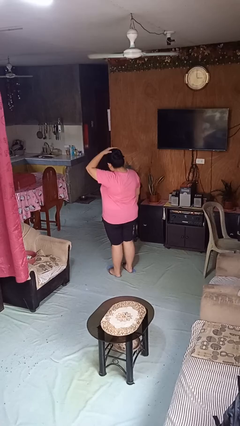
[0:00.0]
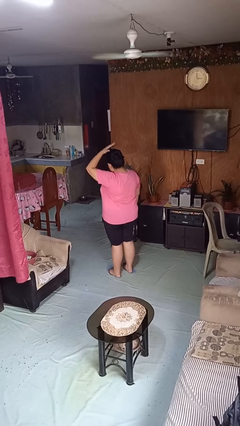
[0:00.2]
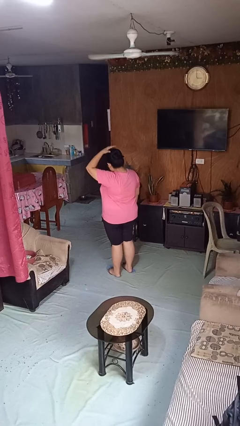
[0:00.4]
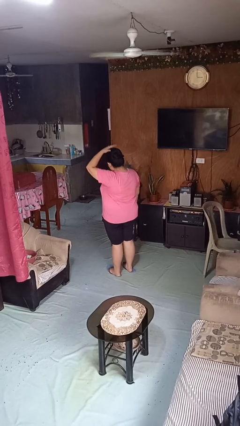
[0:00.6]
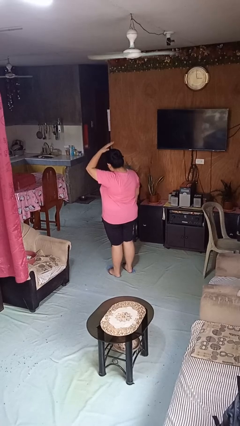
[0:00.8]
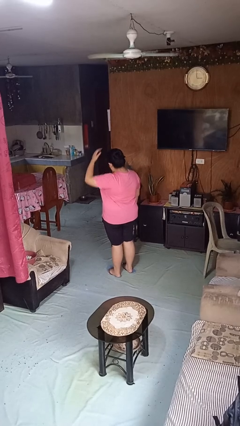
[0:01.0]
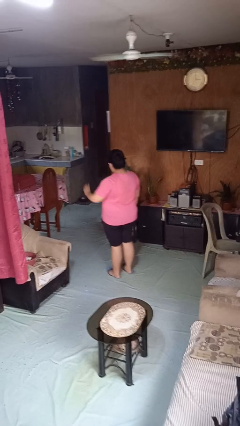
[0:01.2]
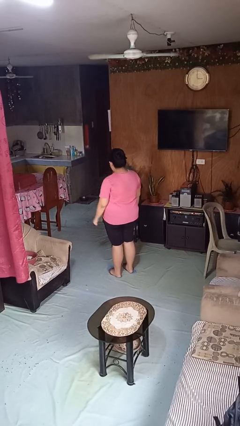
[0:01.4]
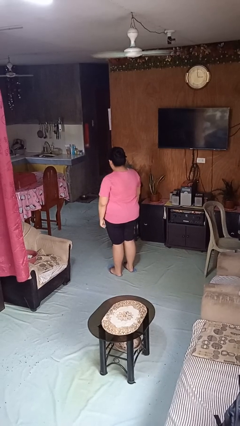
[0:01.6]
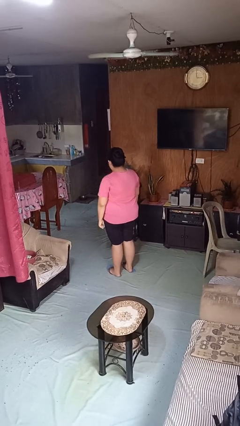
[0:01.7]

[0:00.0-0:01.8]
person pats head

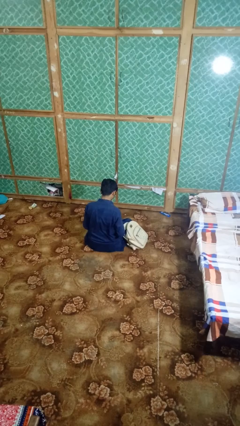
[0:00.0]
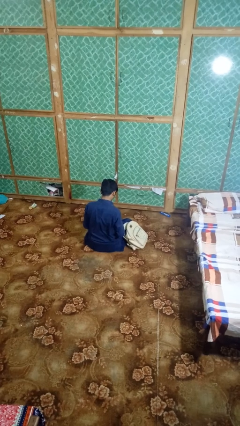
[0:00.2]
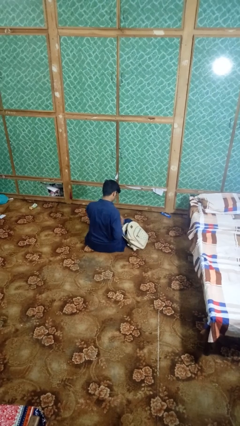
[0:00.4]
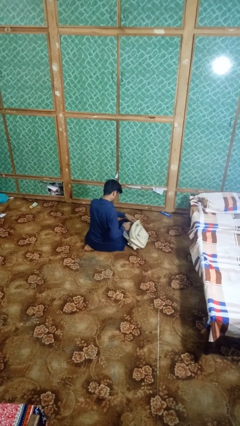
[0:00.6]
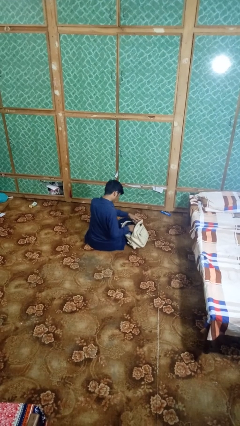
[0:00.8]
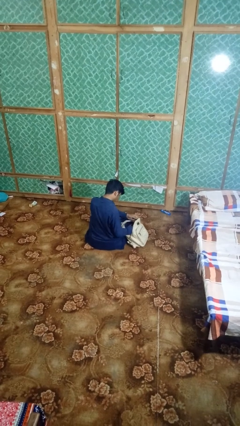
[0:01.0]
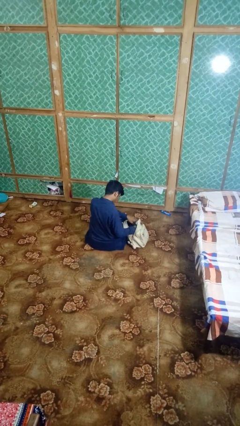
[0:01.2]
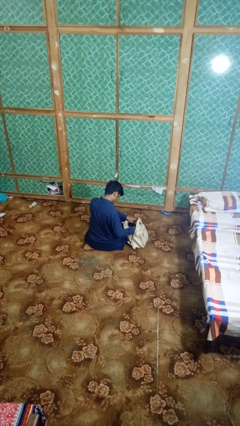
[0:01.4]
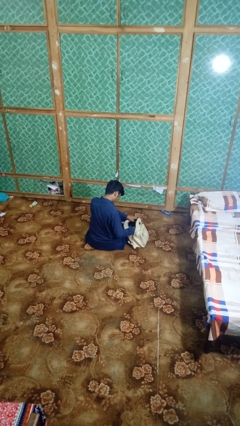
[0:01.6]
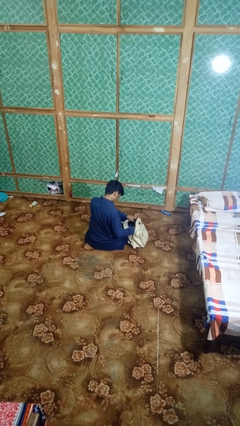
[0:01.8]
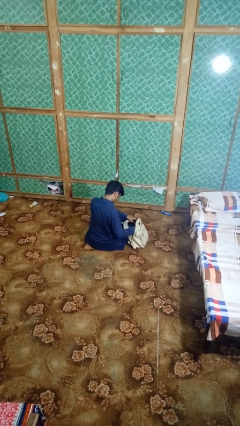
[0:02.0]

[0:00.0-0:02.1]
person searches in backpack

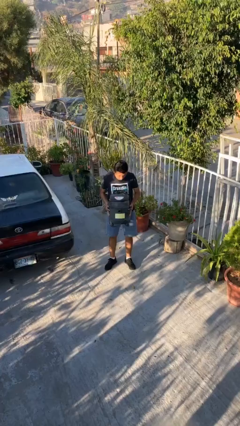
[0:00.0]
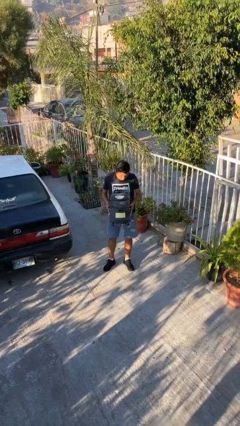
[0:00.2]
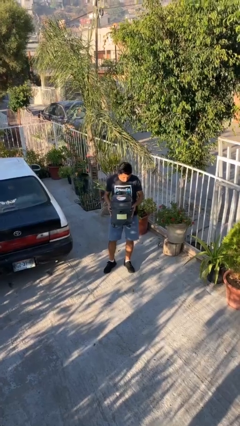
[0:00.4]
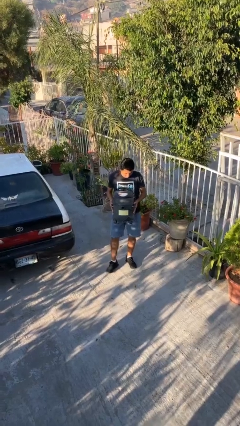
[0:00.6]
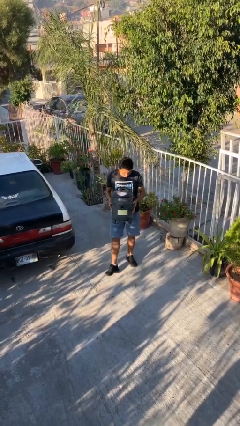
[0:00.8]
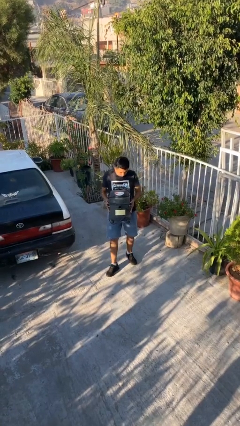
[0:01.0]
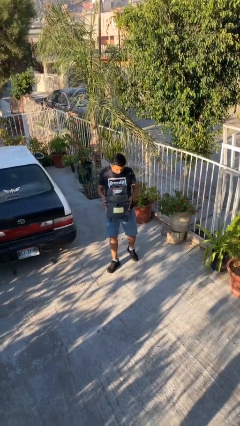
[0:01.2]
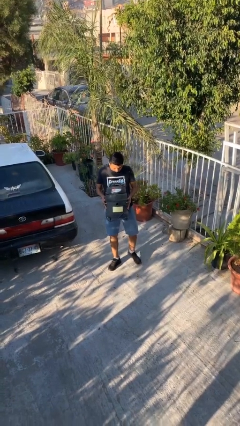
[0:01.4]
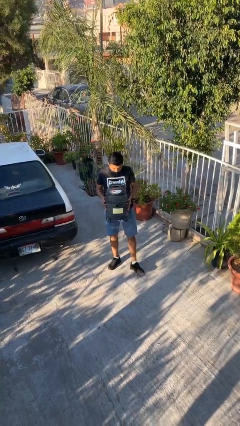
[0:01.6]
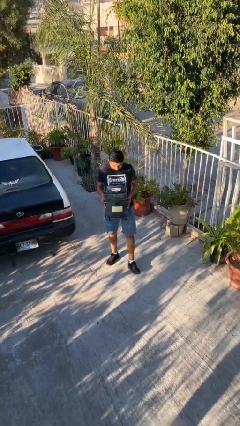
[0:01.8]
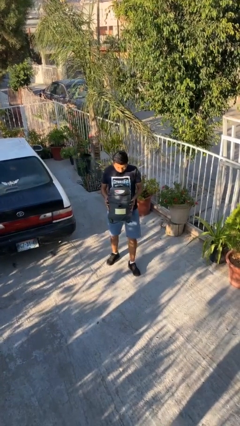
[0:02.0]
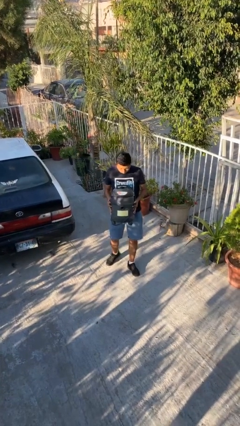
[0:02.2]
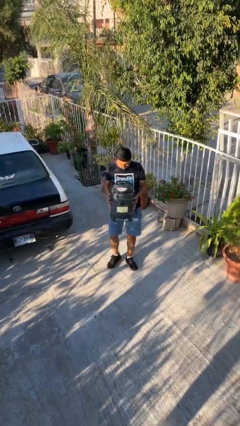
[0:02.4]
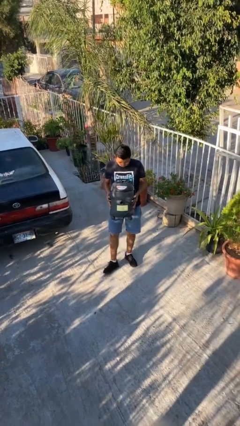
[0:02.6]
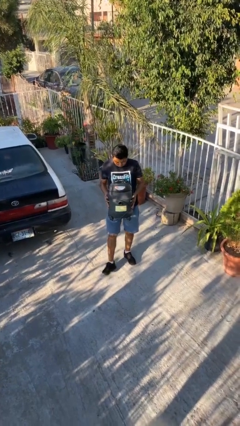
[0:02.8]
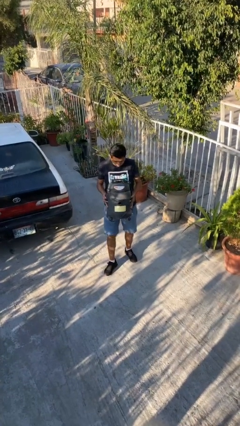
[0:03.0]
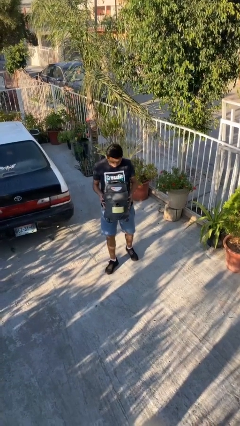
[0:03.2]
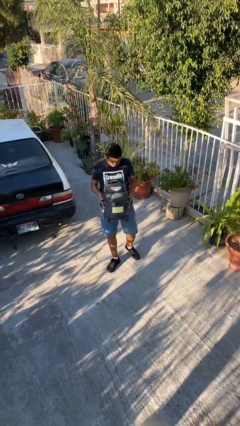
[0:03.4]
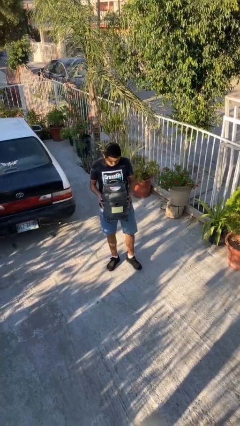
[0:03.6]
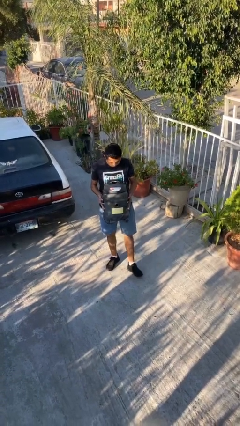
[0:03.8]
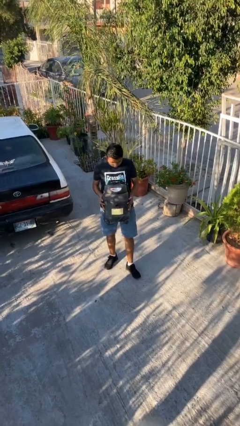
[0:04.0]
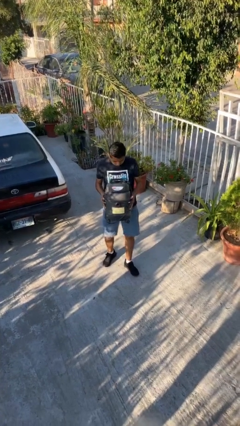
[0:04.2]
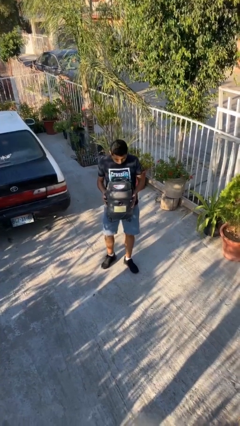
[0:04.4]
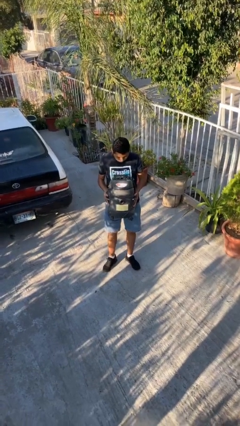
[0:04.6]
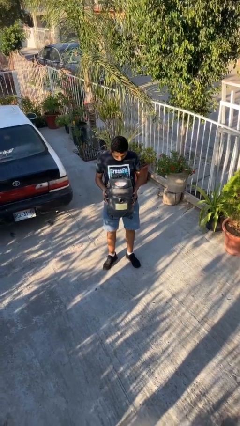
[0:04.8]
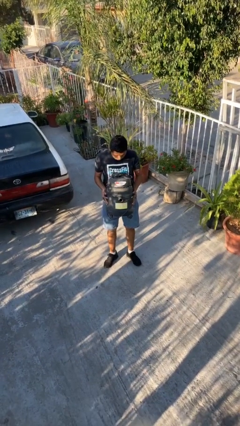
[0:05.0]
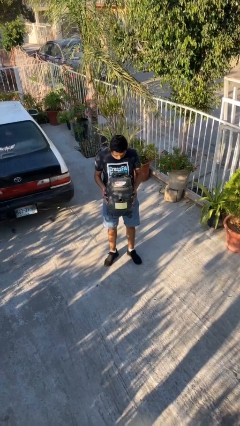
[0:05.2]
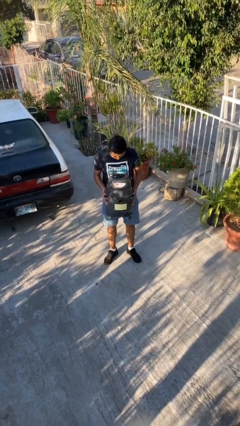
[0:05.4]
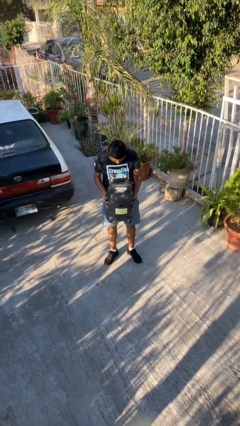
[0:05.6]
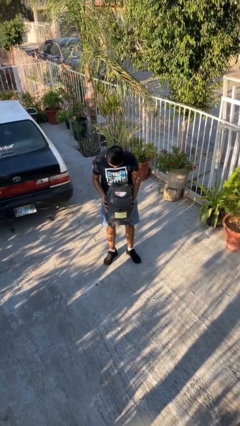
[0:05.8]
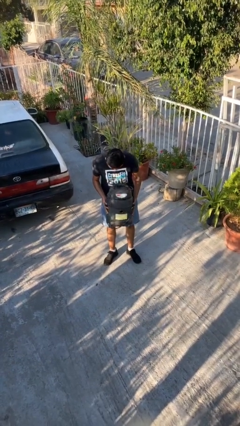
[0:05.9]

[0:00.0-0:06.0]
person carries heavy object

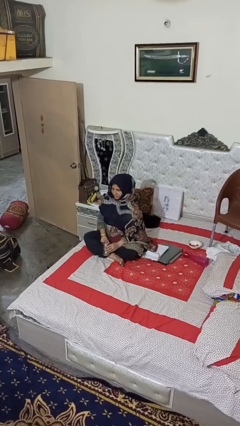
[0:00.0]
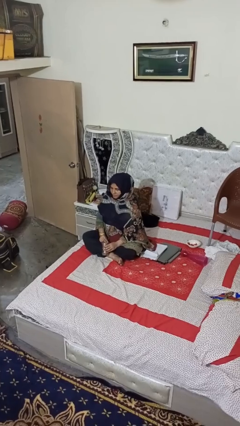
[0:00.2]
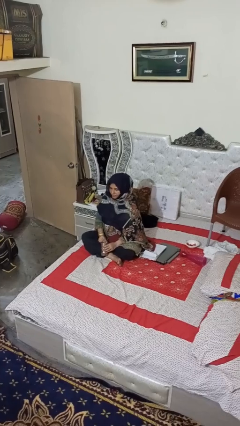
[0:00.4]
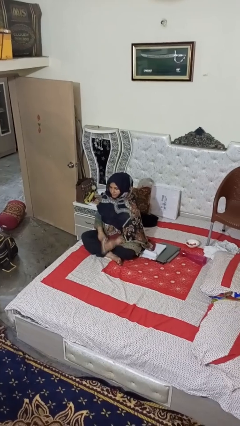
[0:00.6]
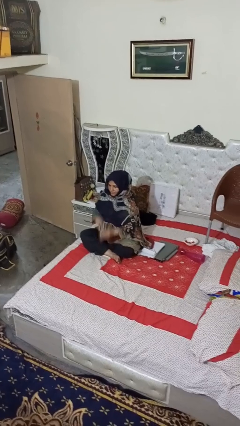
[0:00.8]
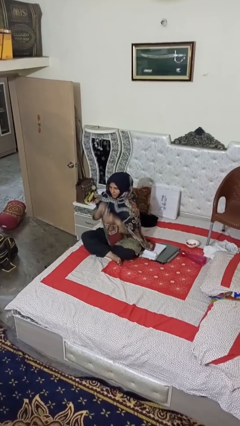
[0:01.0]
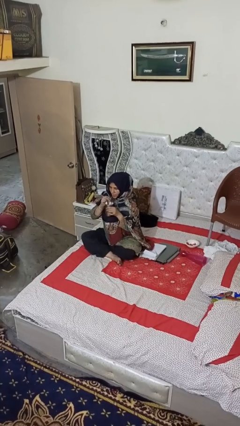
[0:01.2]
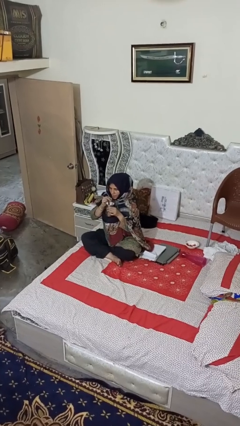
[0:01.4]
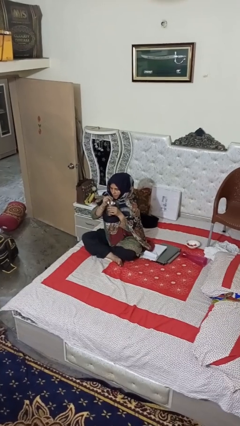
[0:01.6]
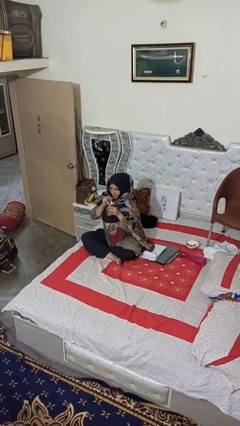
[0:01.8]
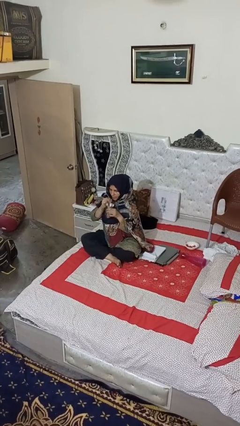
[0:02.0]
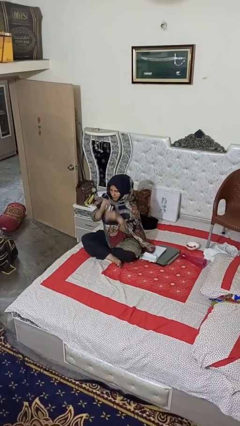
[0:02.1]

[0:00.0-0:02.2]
person drinks from straw

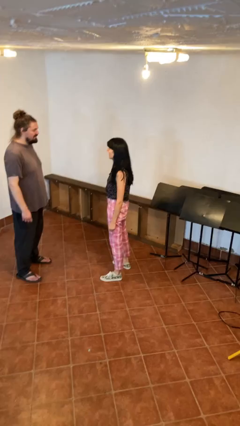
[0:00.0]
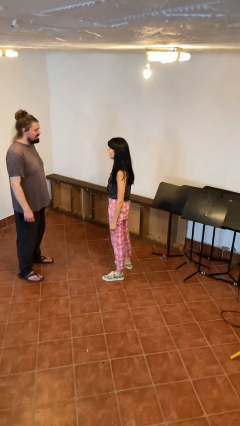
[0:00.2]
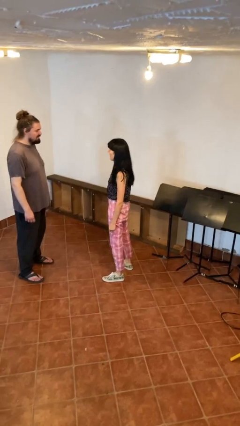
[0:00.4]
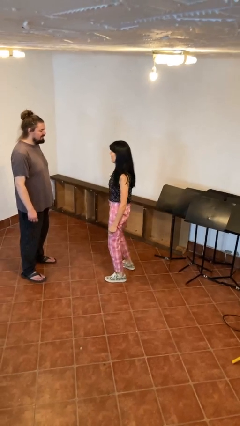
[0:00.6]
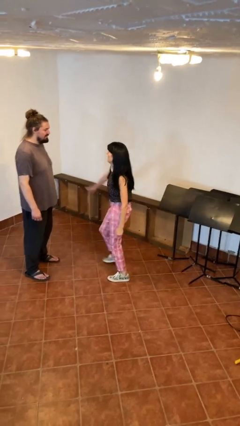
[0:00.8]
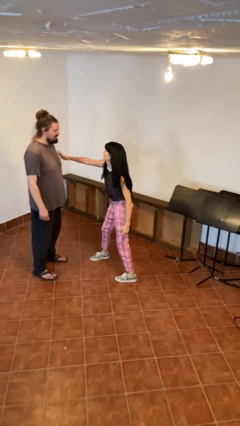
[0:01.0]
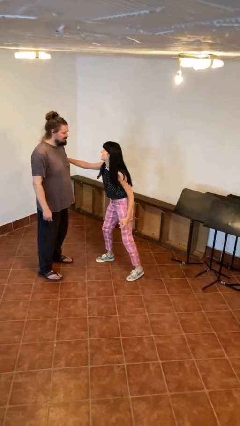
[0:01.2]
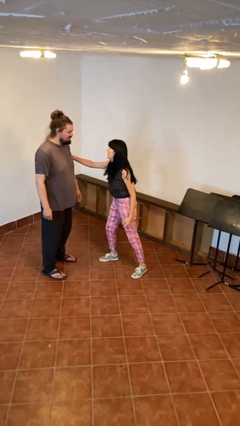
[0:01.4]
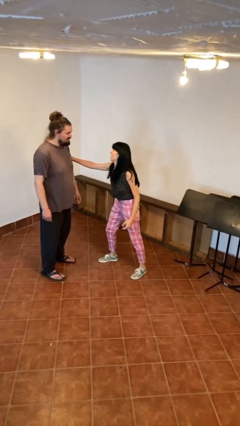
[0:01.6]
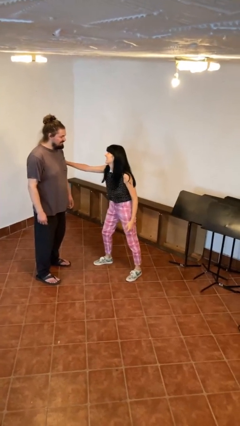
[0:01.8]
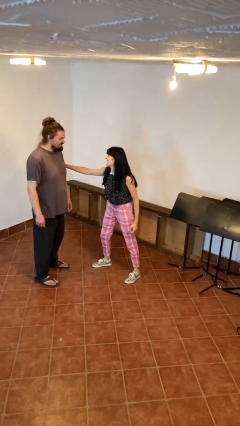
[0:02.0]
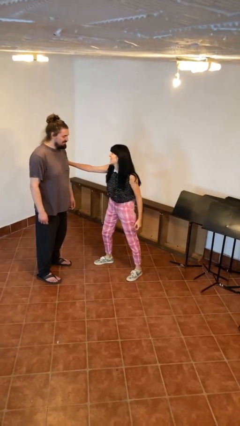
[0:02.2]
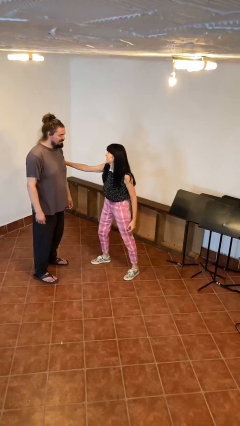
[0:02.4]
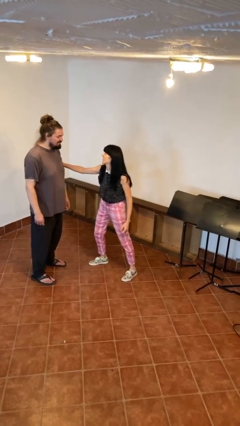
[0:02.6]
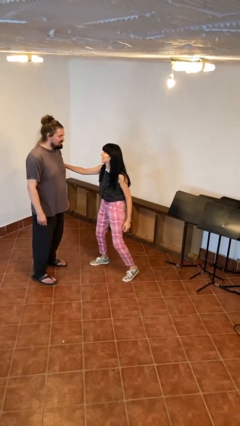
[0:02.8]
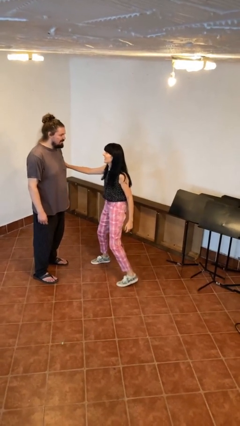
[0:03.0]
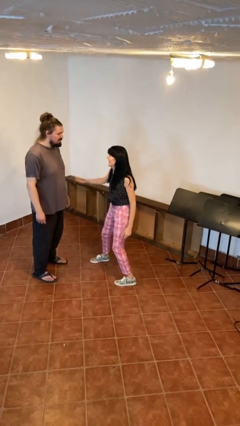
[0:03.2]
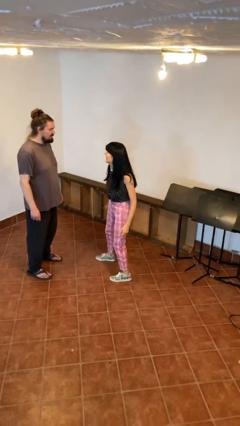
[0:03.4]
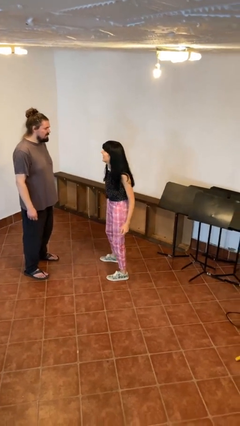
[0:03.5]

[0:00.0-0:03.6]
person grabs person by bicep

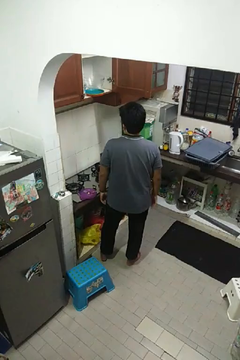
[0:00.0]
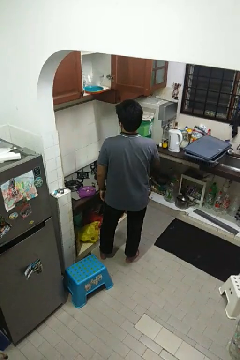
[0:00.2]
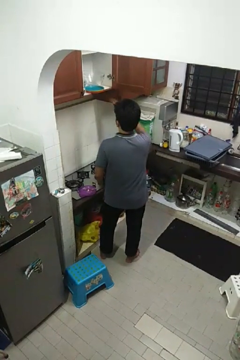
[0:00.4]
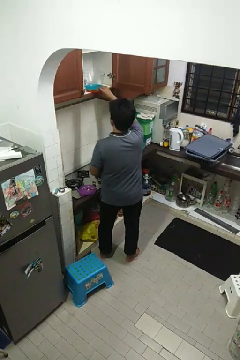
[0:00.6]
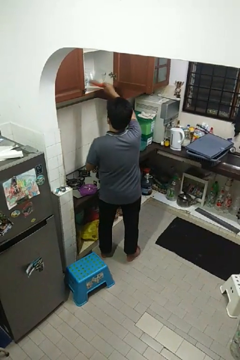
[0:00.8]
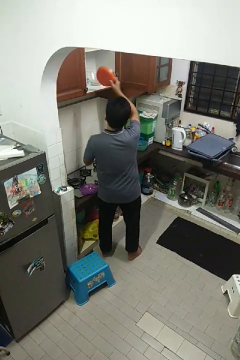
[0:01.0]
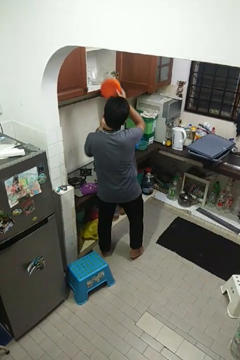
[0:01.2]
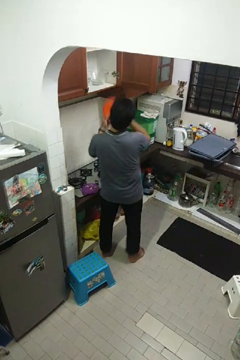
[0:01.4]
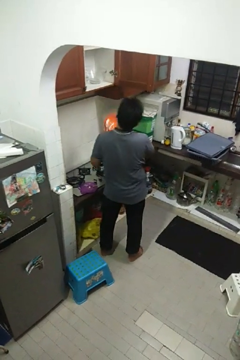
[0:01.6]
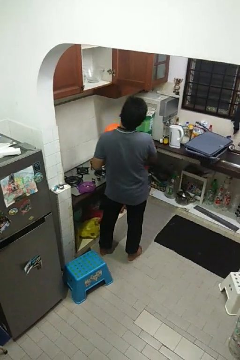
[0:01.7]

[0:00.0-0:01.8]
person takes object from cabinet

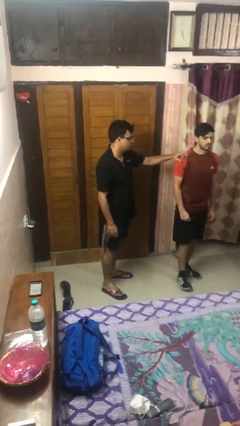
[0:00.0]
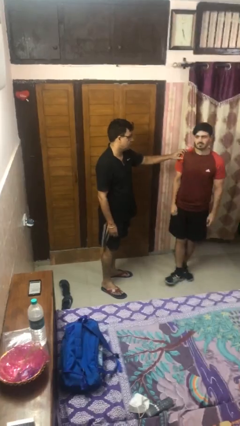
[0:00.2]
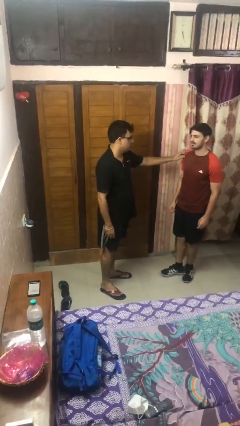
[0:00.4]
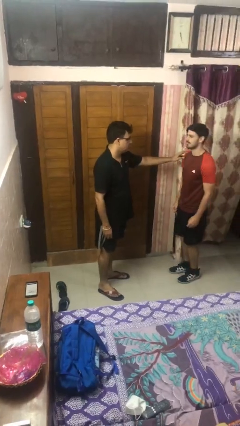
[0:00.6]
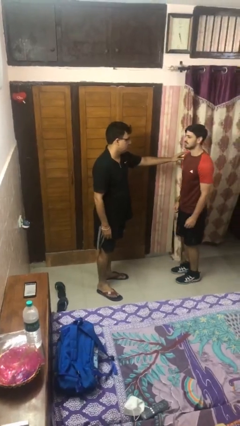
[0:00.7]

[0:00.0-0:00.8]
person spins person around
